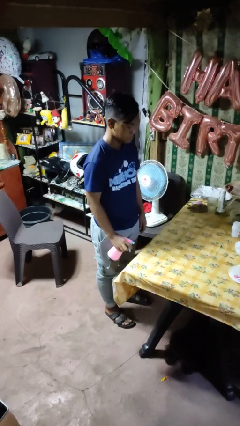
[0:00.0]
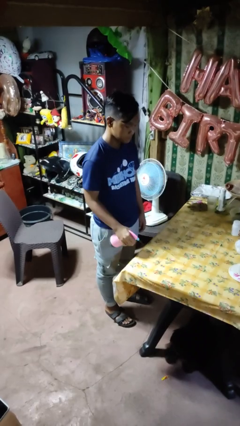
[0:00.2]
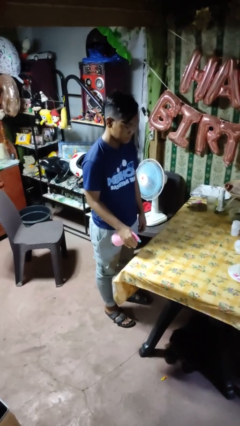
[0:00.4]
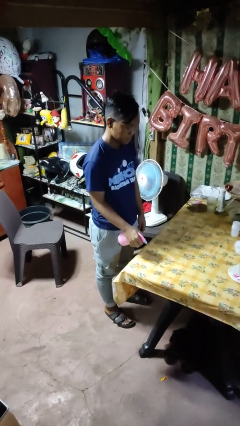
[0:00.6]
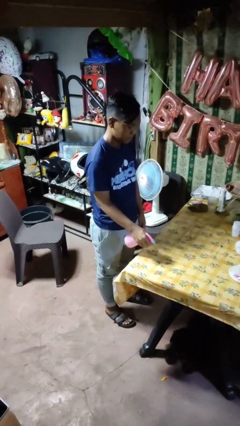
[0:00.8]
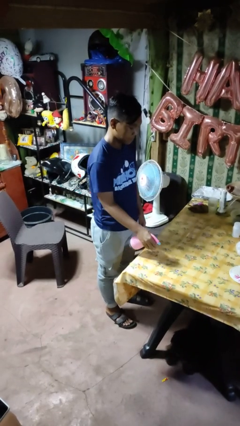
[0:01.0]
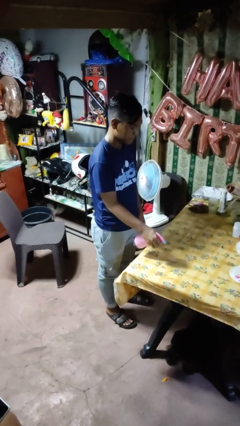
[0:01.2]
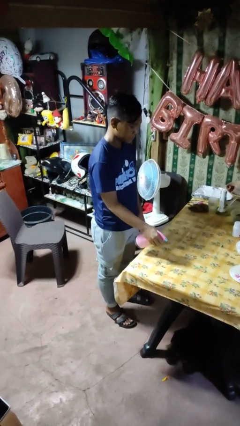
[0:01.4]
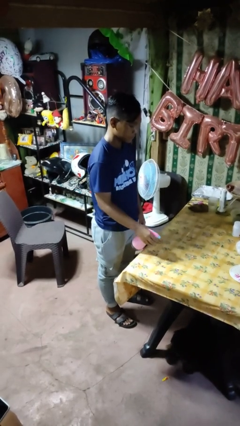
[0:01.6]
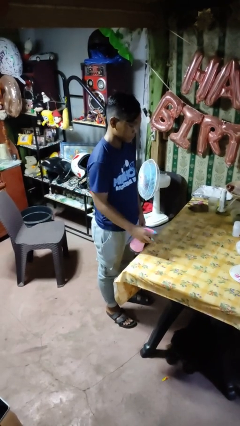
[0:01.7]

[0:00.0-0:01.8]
person sprays from bottle

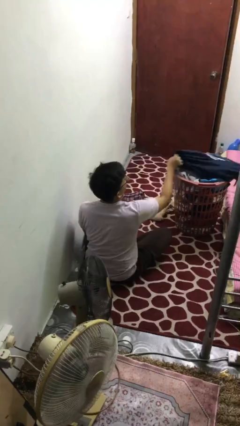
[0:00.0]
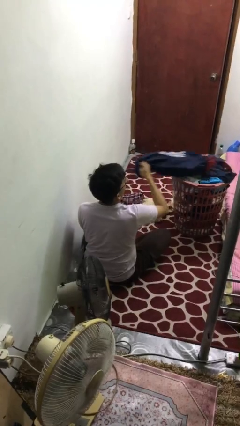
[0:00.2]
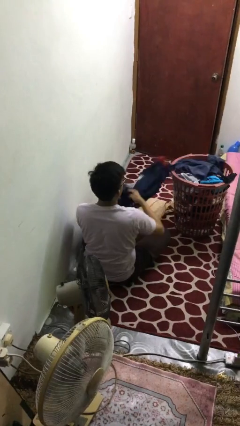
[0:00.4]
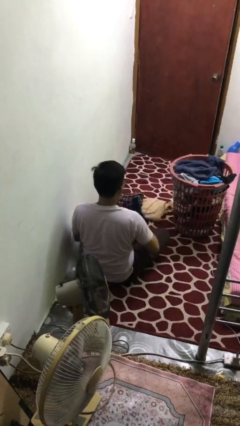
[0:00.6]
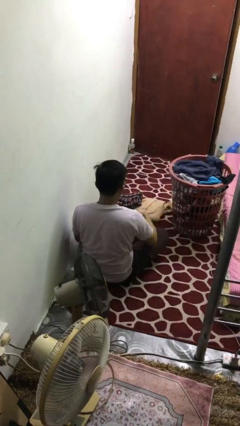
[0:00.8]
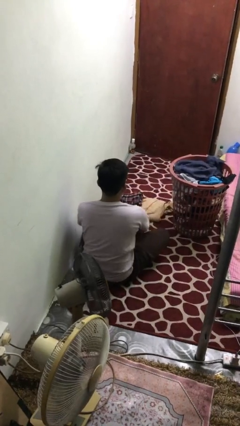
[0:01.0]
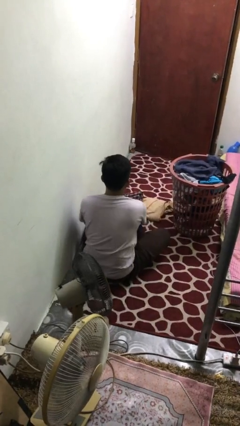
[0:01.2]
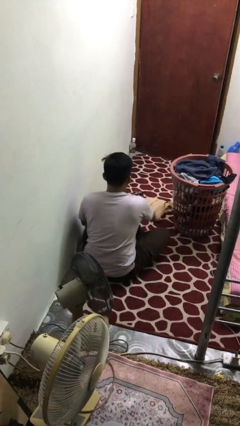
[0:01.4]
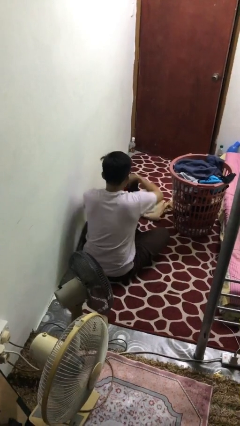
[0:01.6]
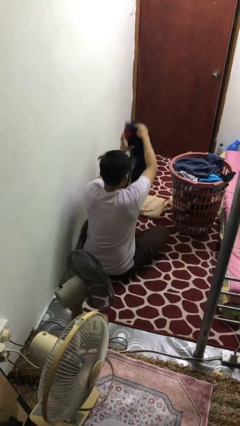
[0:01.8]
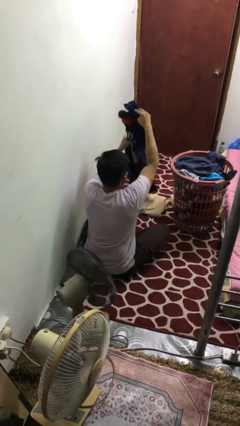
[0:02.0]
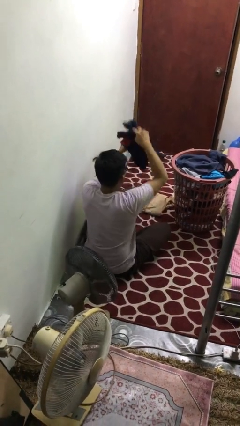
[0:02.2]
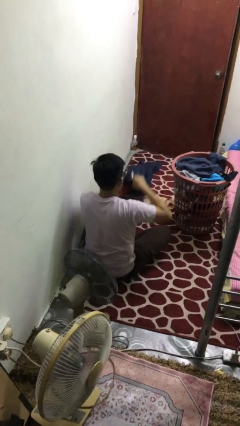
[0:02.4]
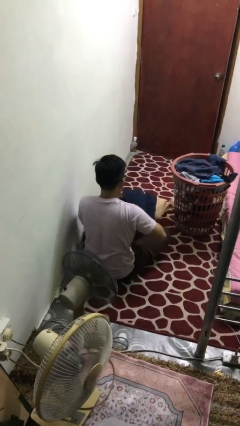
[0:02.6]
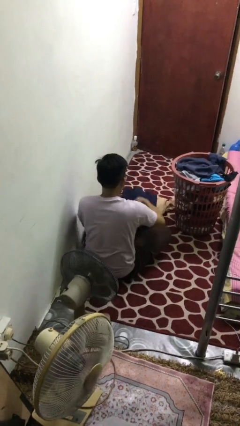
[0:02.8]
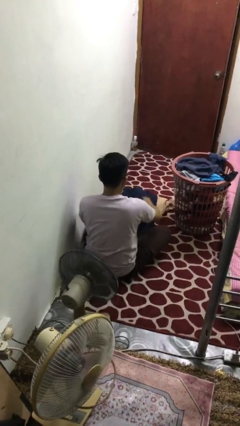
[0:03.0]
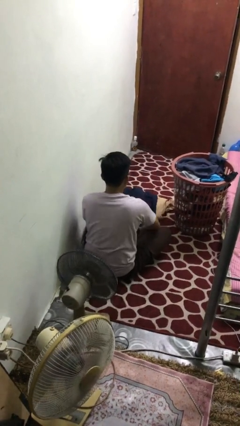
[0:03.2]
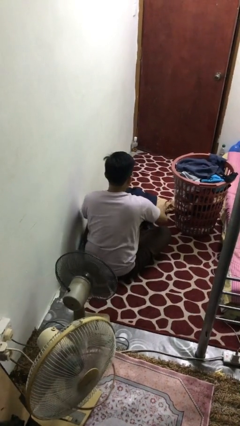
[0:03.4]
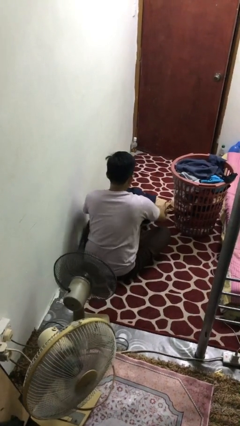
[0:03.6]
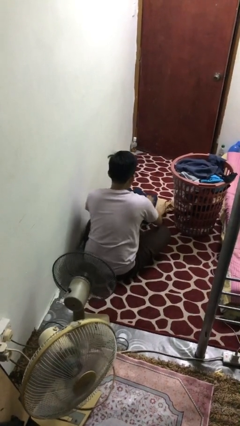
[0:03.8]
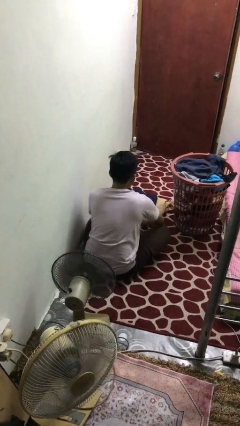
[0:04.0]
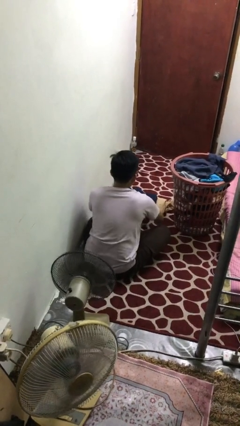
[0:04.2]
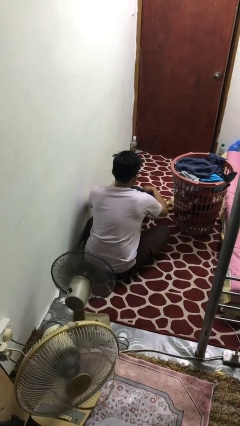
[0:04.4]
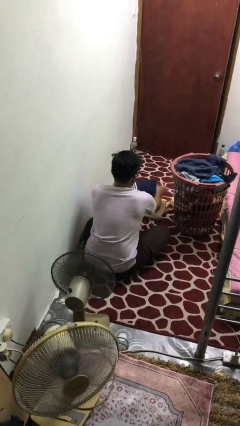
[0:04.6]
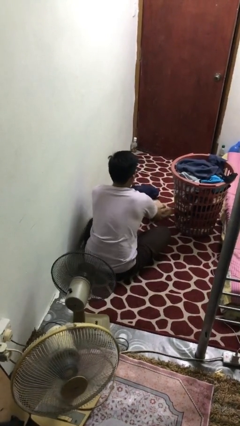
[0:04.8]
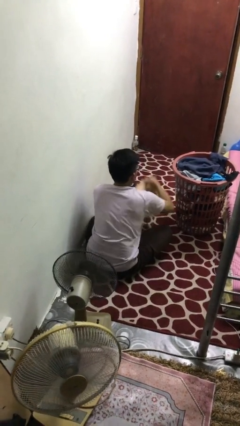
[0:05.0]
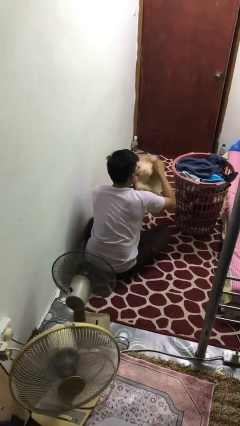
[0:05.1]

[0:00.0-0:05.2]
person folds pants

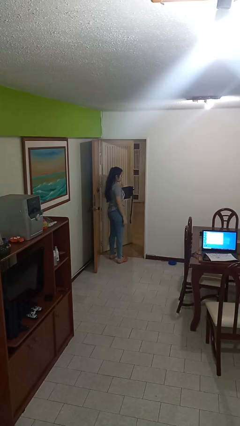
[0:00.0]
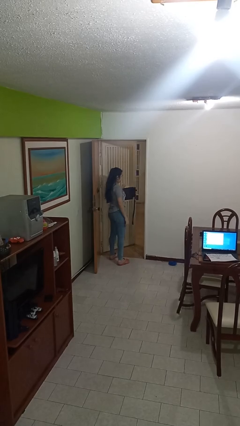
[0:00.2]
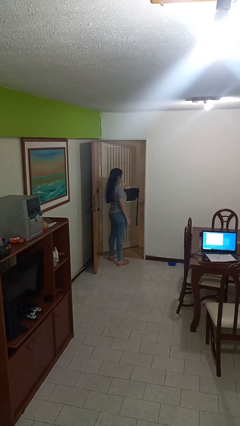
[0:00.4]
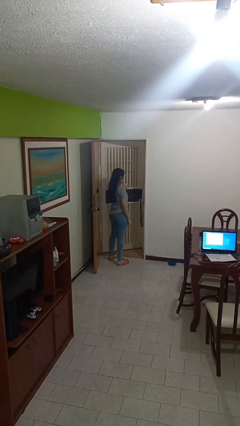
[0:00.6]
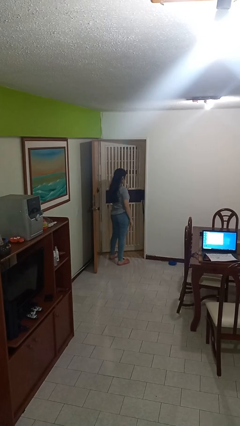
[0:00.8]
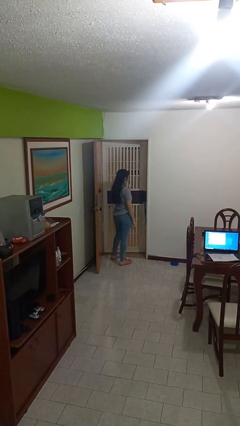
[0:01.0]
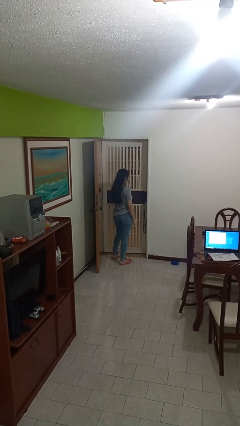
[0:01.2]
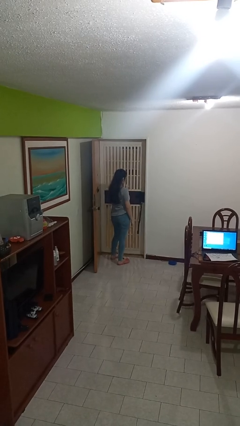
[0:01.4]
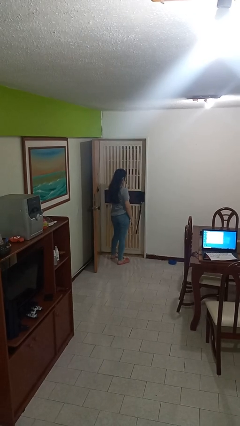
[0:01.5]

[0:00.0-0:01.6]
person closes facility door

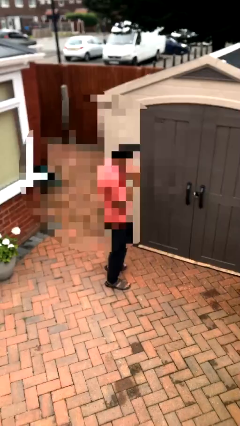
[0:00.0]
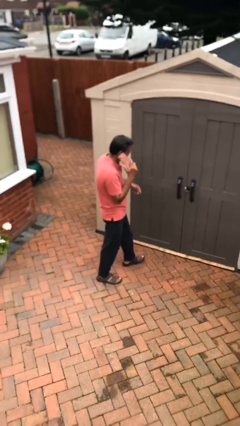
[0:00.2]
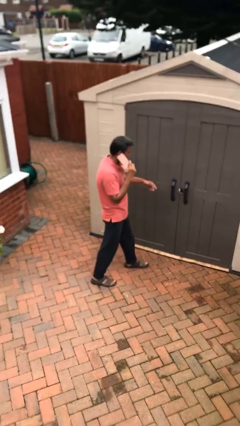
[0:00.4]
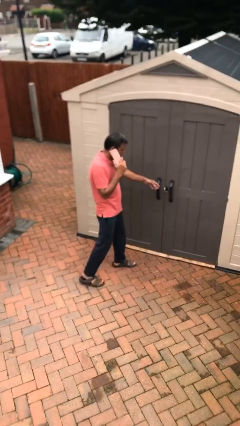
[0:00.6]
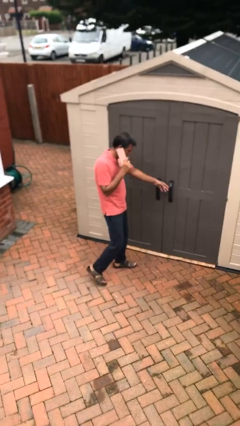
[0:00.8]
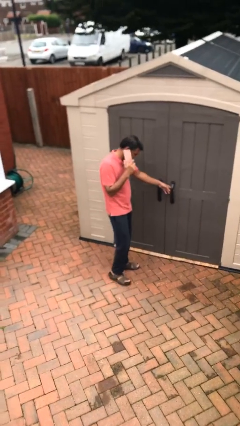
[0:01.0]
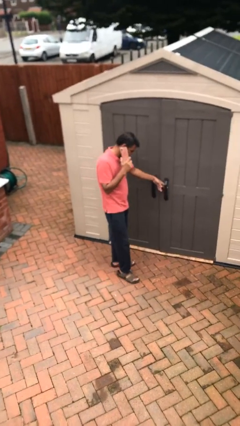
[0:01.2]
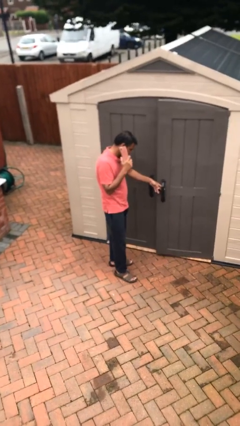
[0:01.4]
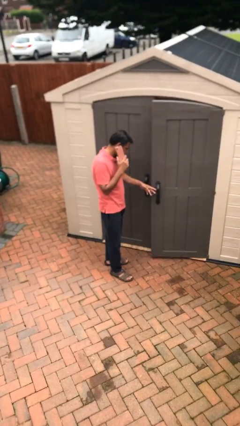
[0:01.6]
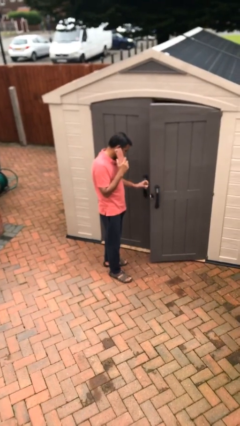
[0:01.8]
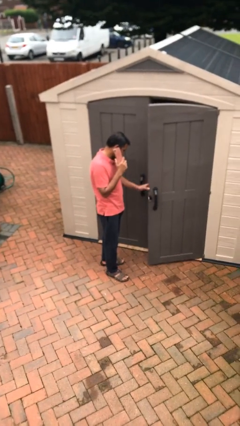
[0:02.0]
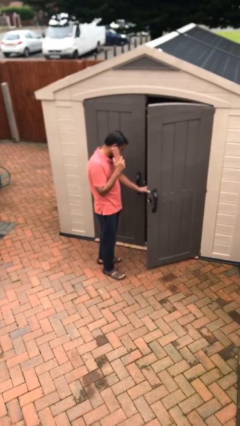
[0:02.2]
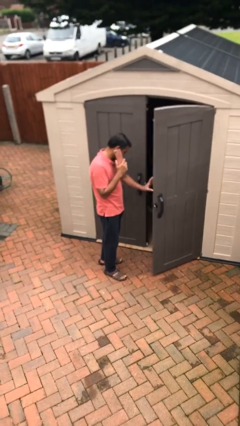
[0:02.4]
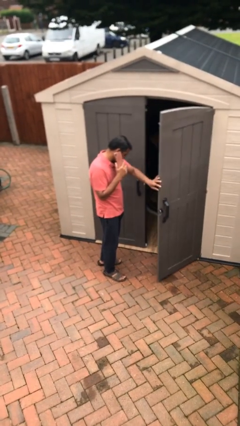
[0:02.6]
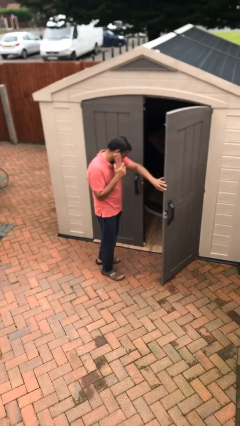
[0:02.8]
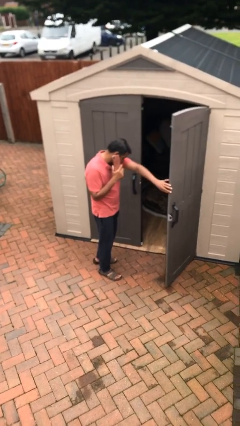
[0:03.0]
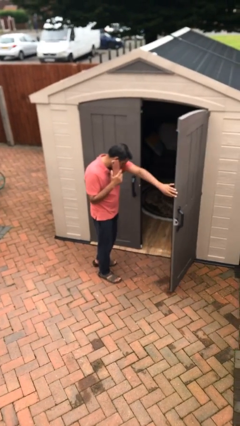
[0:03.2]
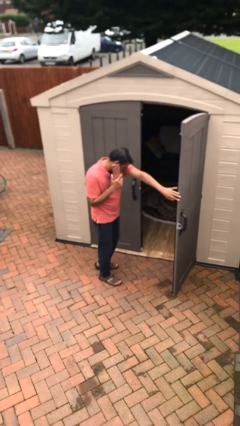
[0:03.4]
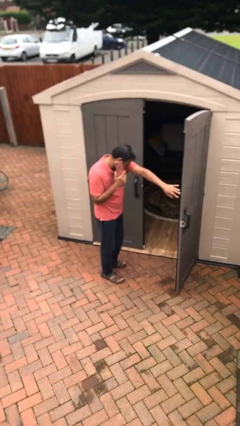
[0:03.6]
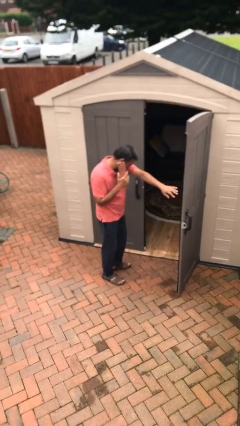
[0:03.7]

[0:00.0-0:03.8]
person opens facility door

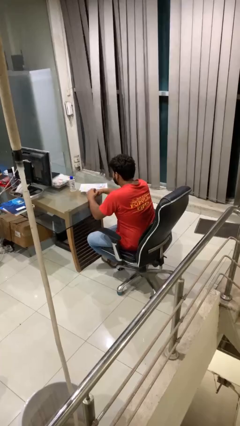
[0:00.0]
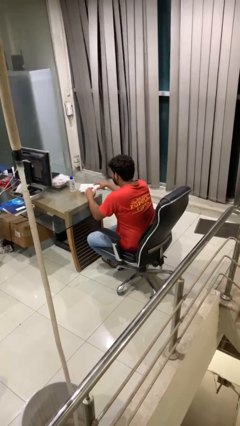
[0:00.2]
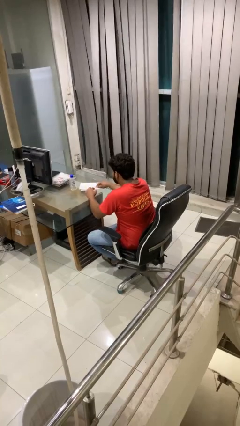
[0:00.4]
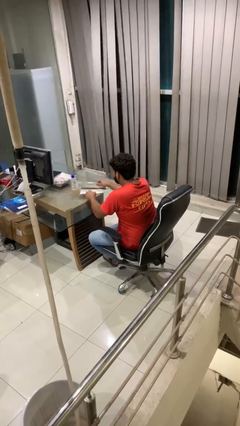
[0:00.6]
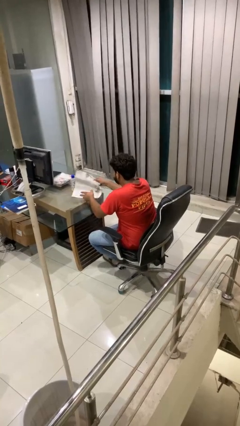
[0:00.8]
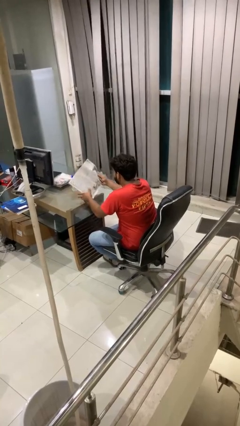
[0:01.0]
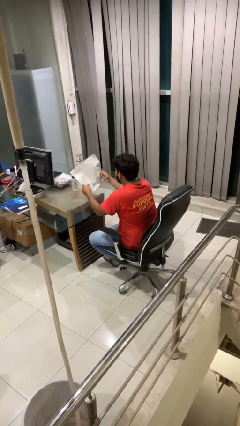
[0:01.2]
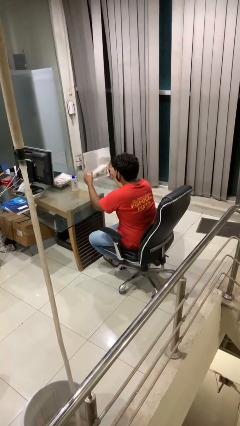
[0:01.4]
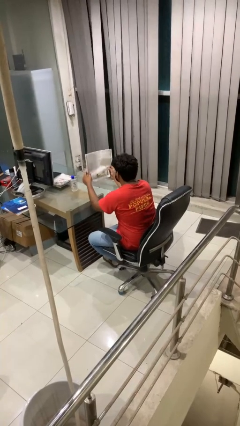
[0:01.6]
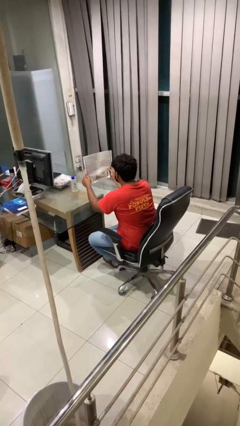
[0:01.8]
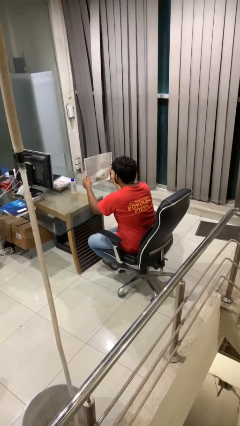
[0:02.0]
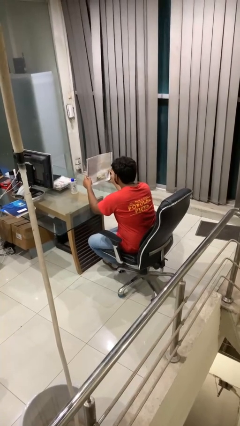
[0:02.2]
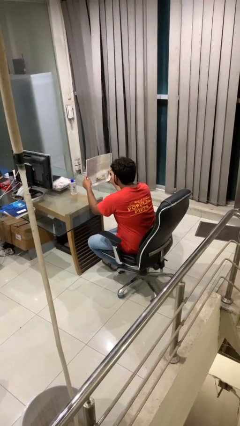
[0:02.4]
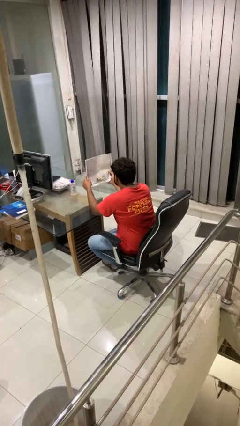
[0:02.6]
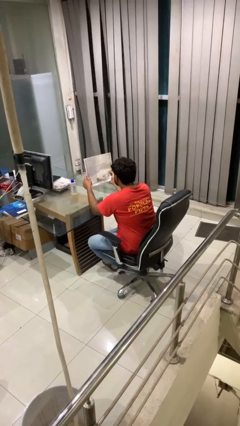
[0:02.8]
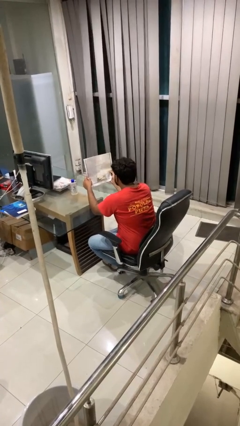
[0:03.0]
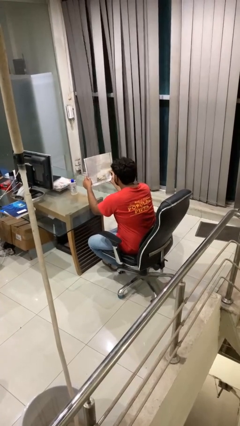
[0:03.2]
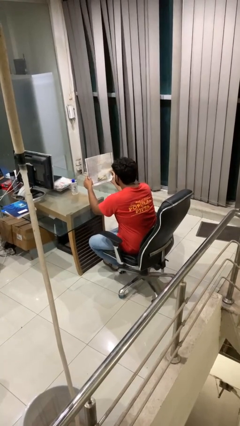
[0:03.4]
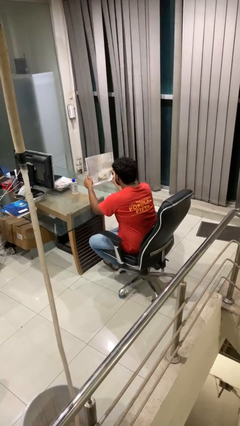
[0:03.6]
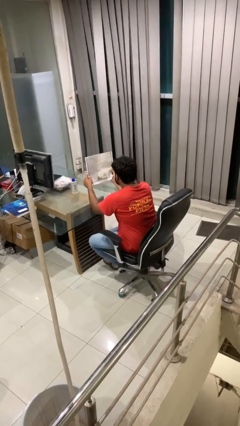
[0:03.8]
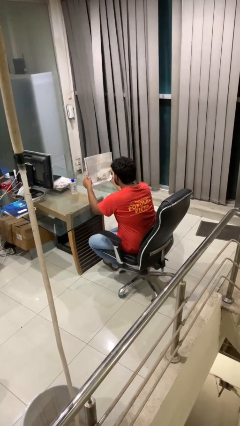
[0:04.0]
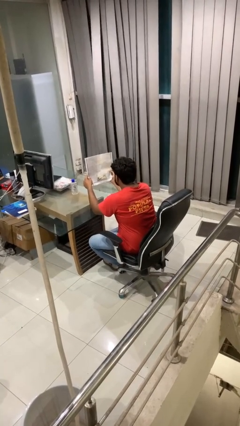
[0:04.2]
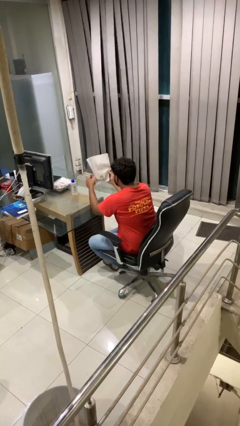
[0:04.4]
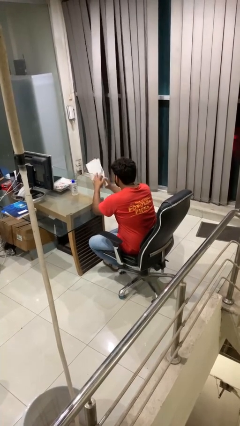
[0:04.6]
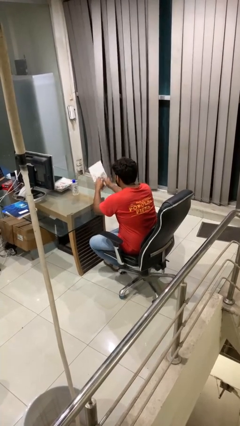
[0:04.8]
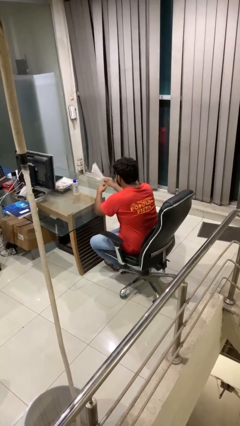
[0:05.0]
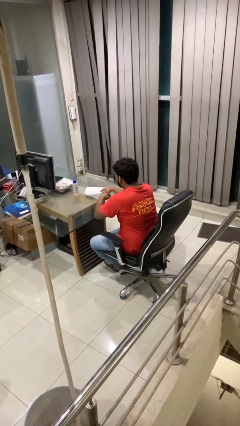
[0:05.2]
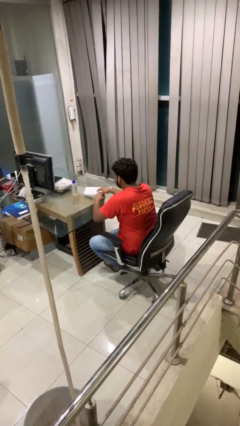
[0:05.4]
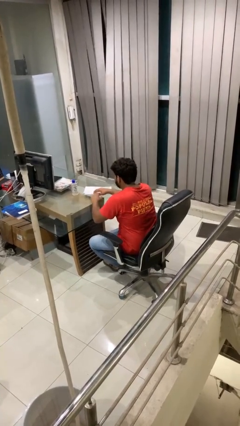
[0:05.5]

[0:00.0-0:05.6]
person reads newspaper
